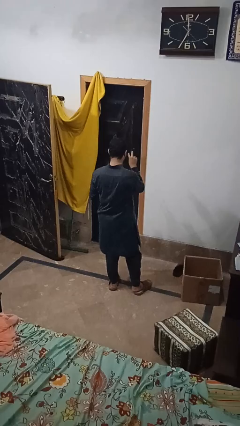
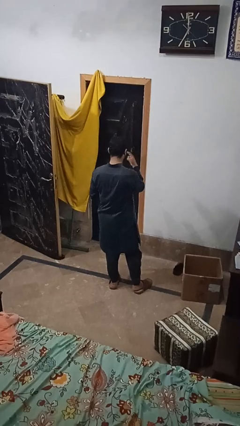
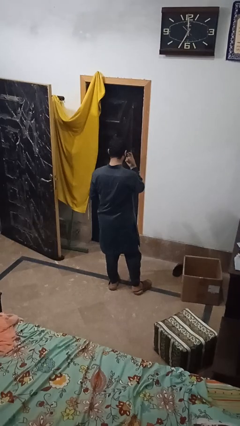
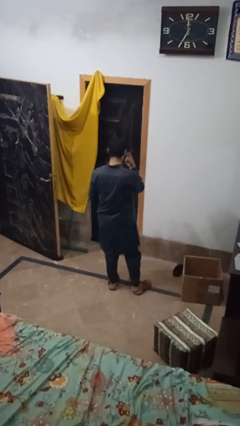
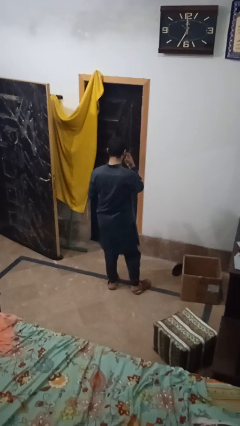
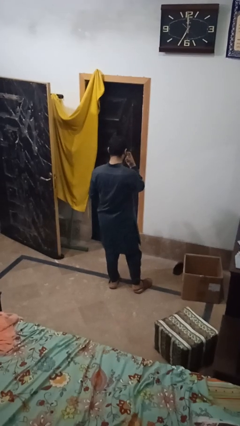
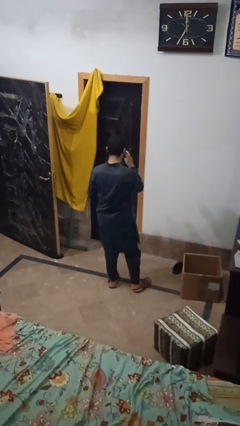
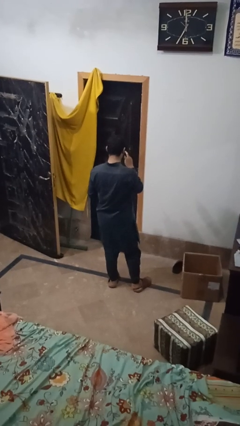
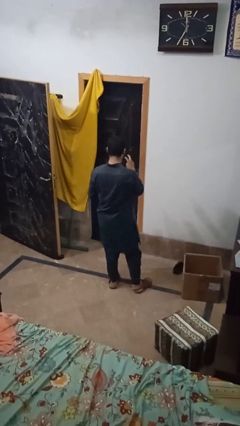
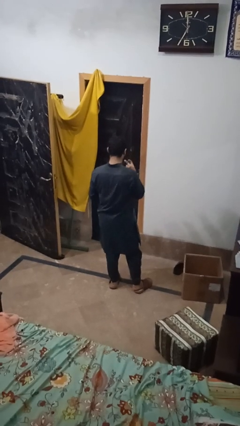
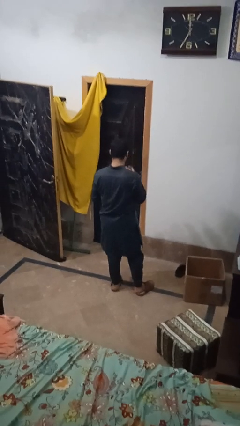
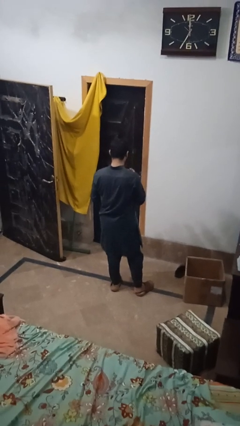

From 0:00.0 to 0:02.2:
person gestures watch closely

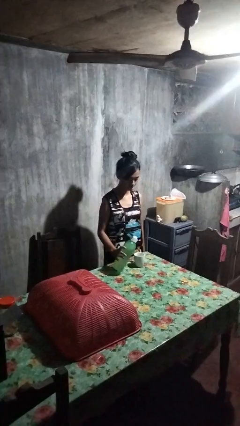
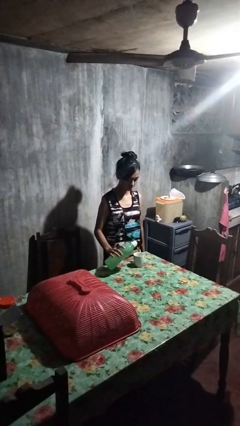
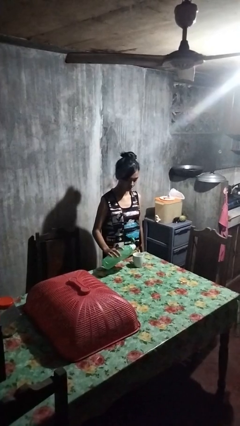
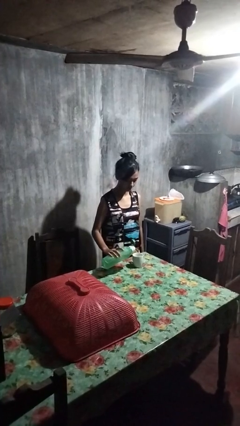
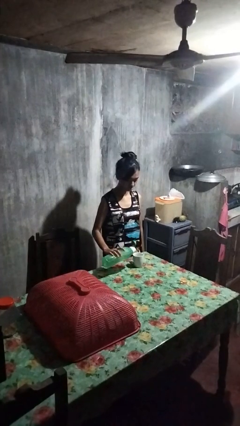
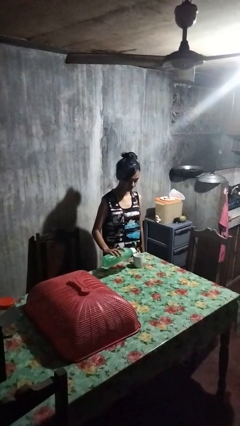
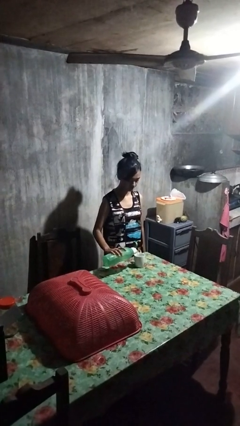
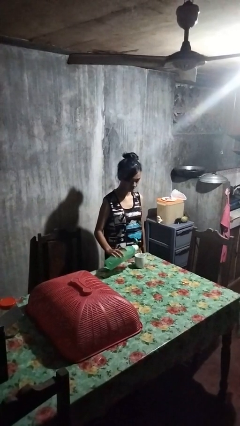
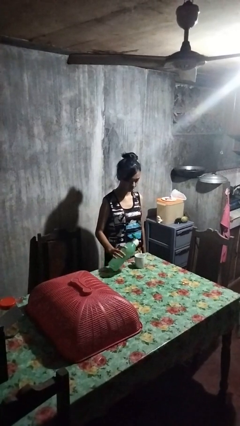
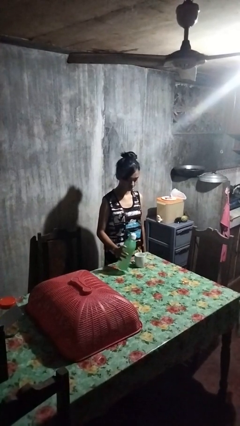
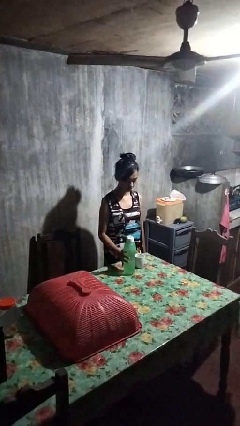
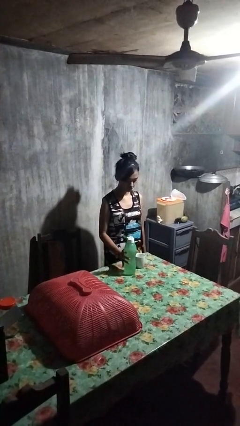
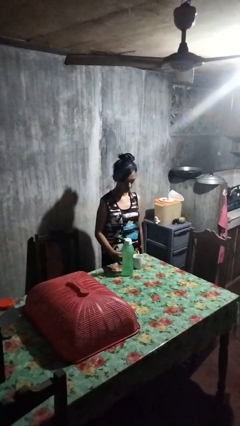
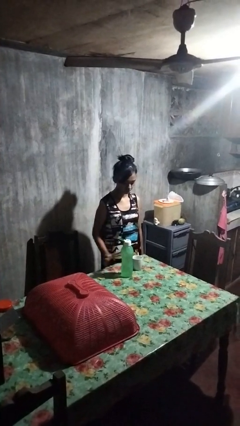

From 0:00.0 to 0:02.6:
person pours liquid into cup

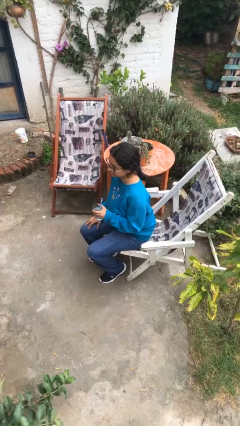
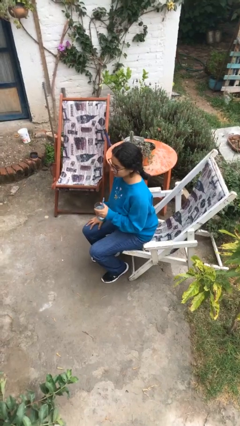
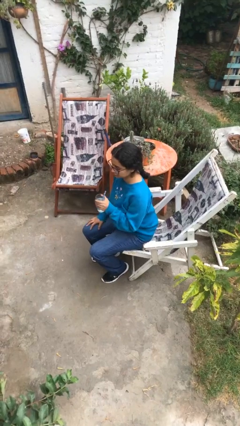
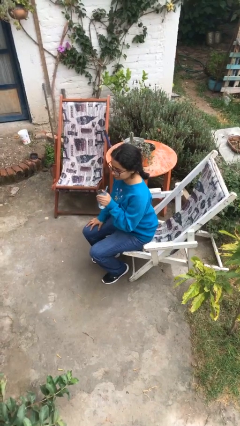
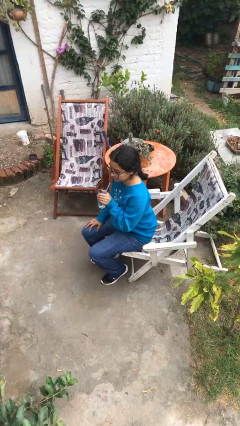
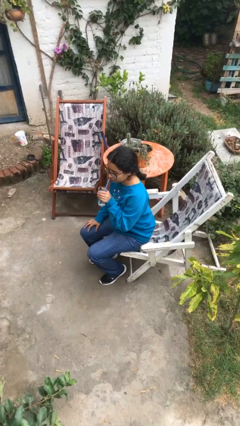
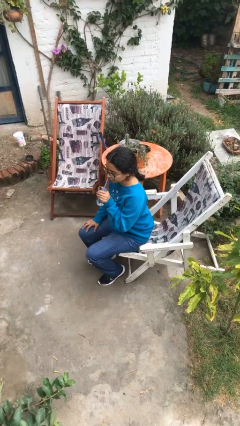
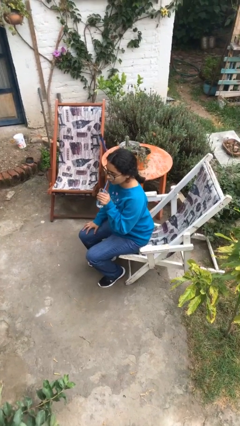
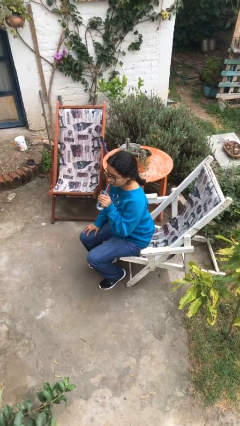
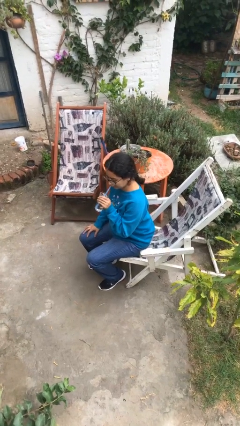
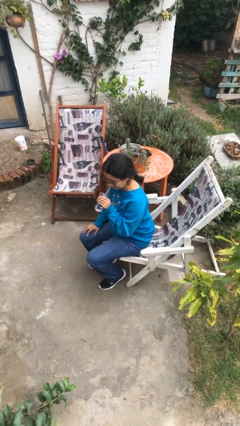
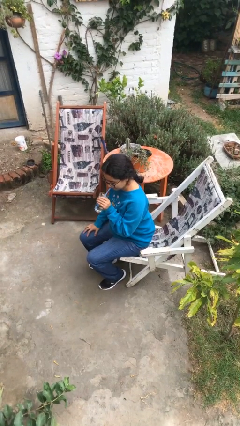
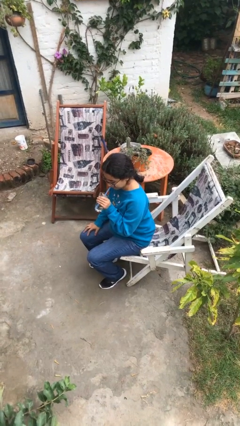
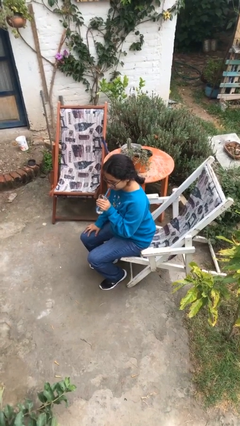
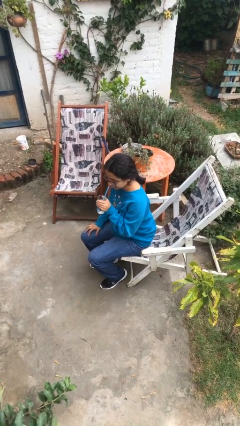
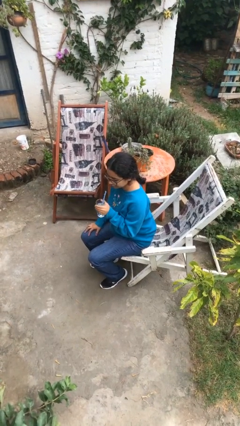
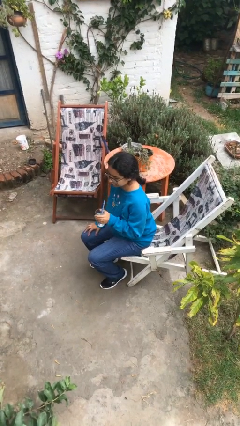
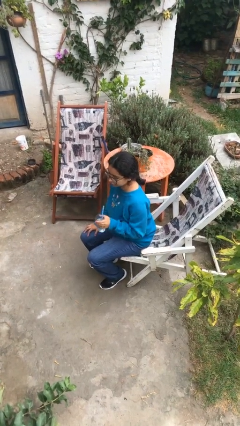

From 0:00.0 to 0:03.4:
person drinks from straw

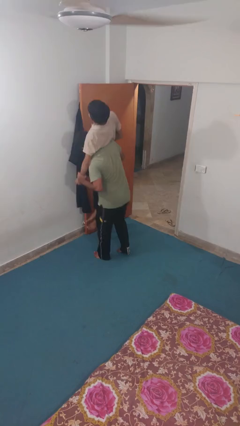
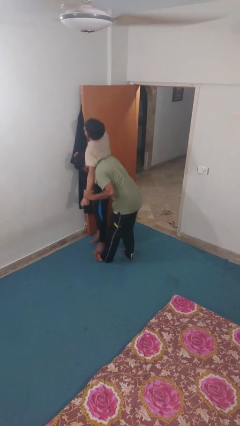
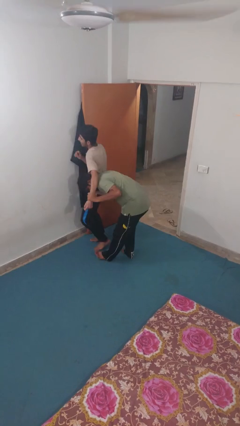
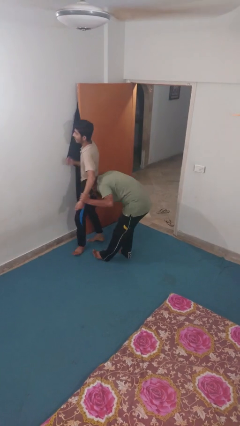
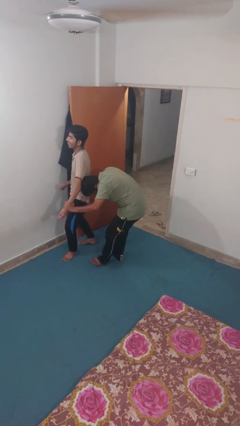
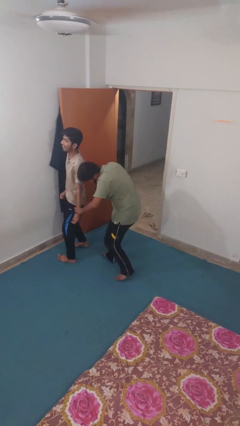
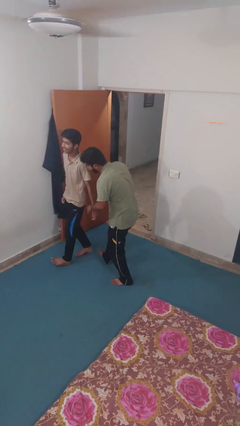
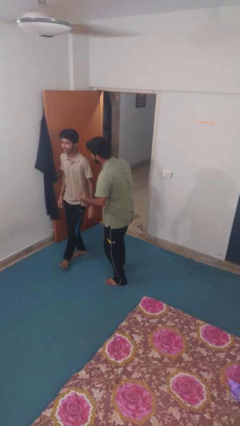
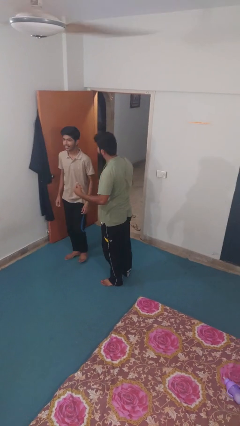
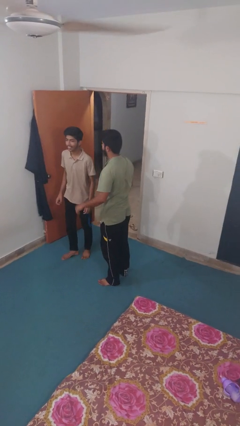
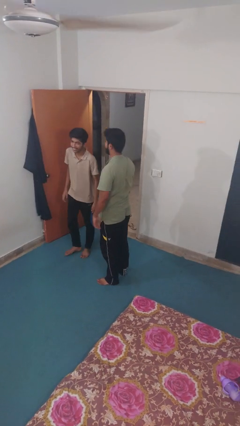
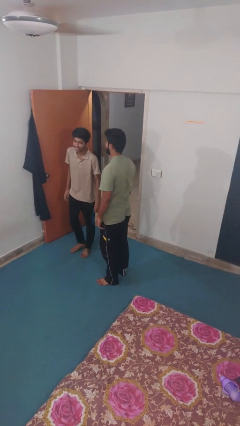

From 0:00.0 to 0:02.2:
person puts down person

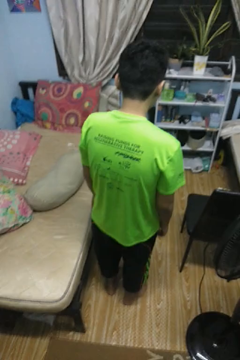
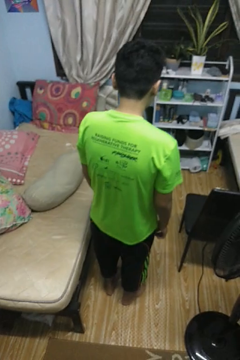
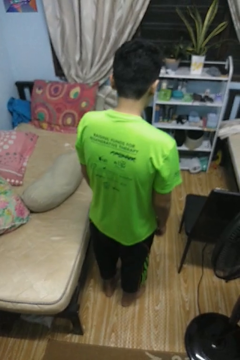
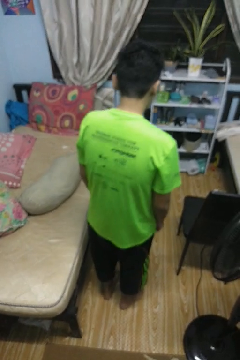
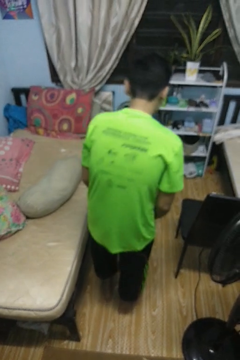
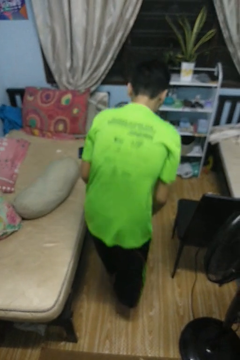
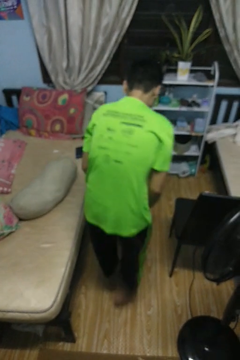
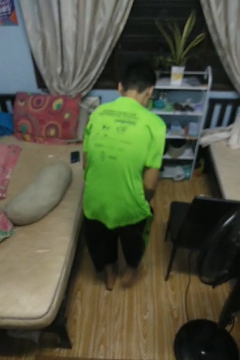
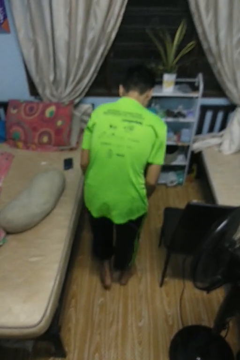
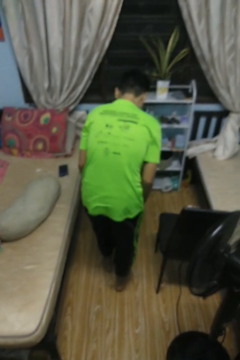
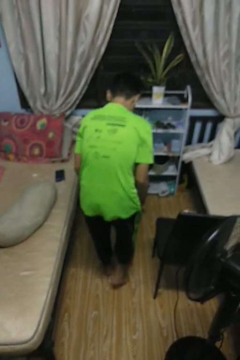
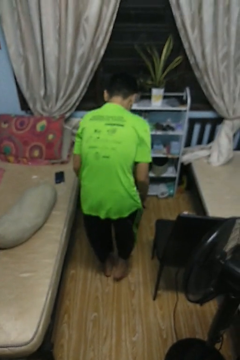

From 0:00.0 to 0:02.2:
person walks tiptoe

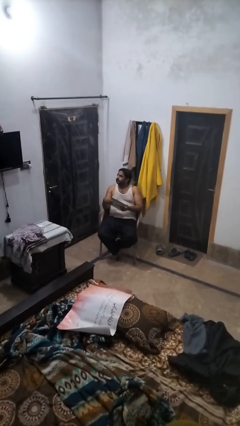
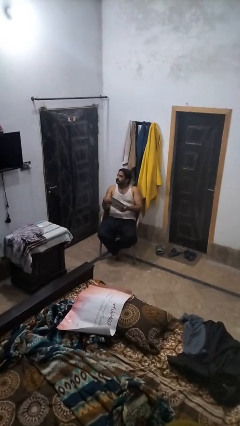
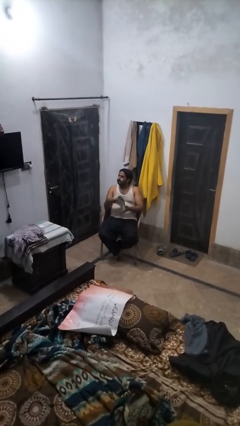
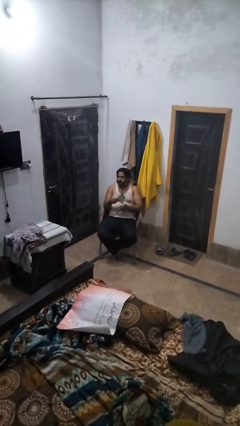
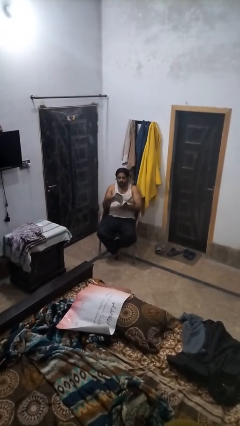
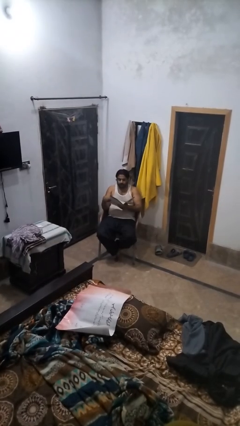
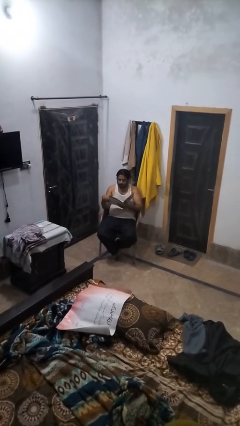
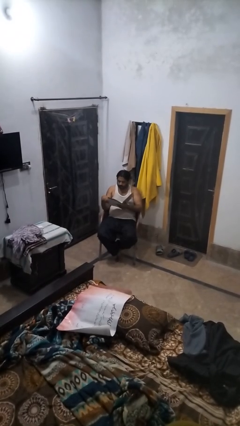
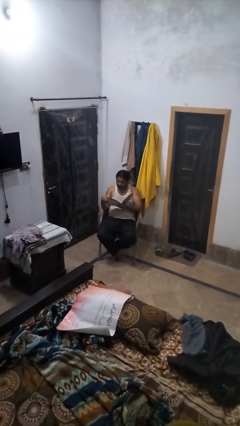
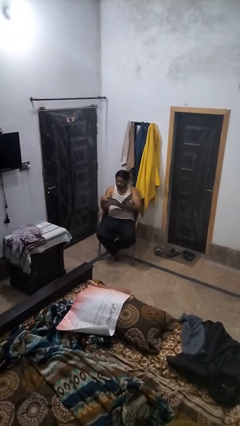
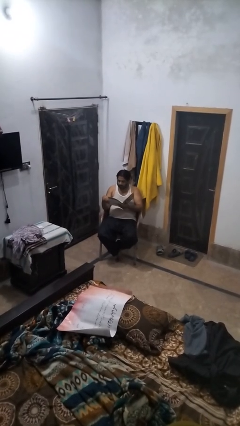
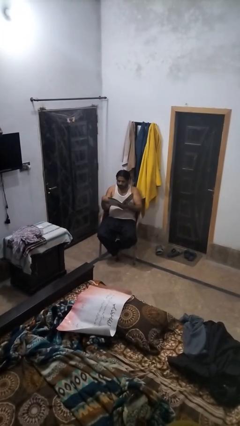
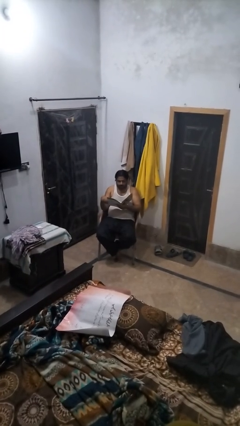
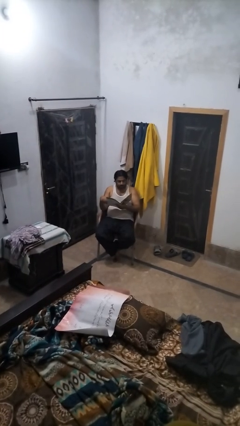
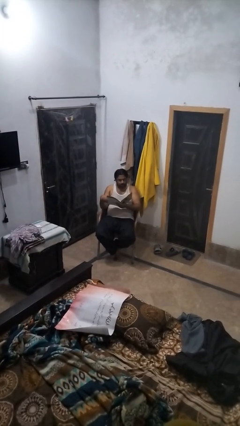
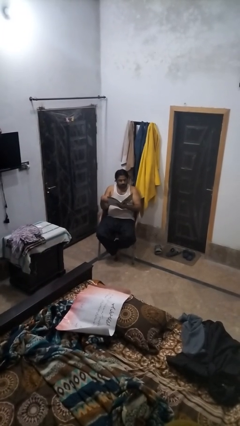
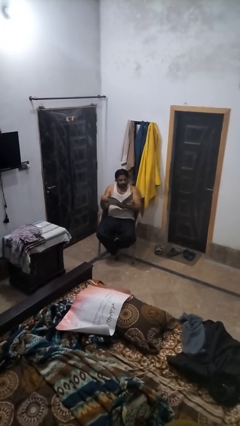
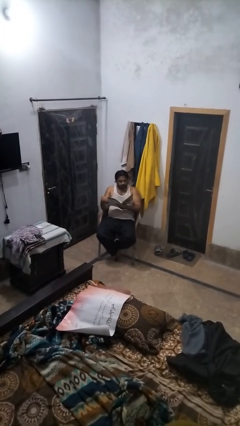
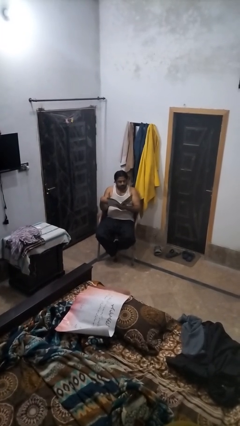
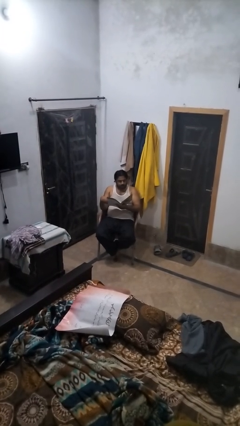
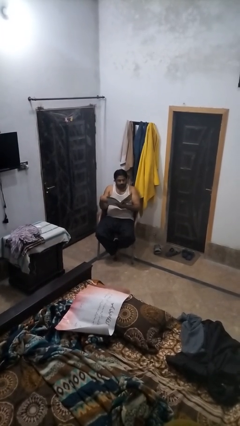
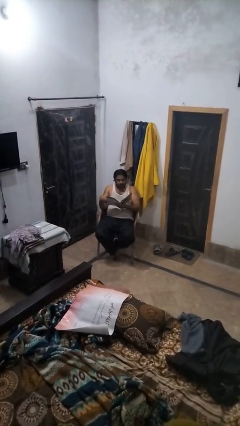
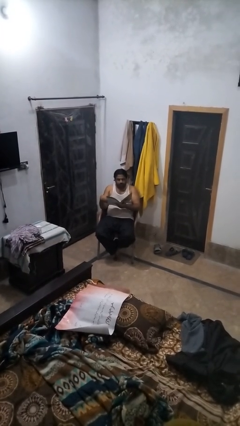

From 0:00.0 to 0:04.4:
person reads magazine

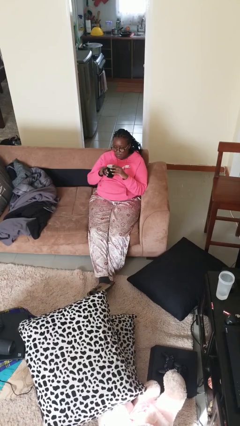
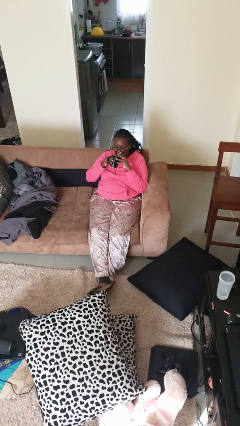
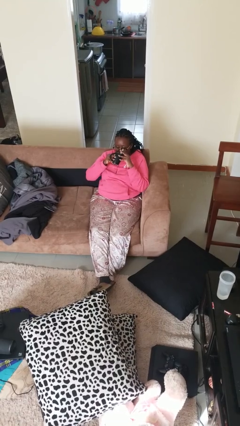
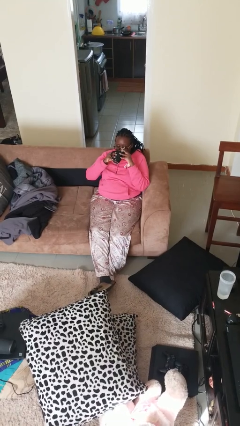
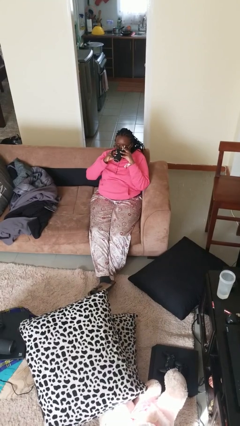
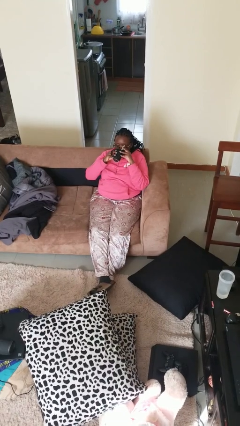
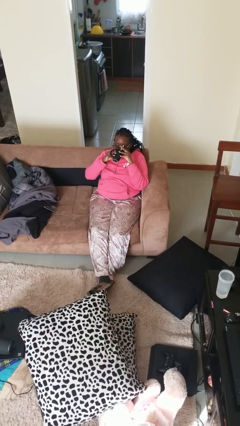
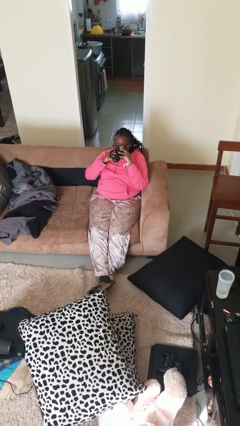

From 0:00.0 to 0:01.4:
person drinks from mug
